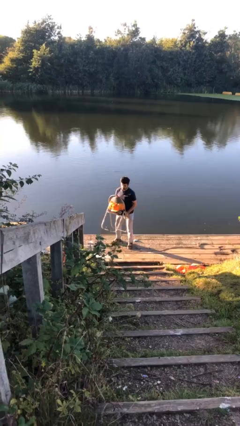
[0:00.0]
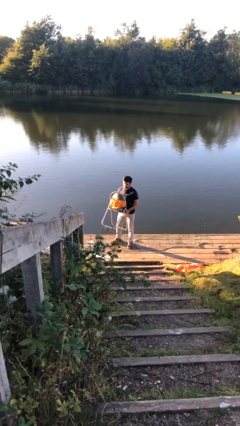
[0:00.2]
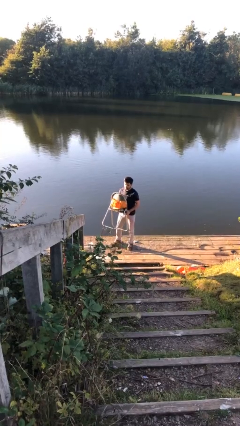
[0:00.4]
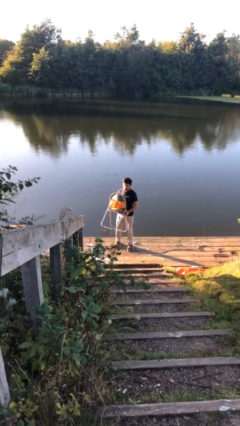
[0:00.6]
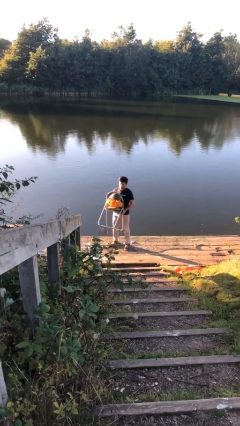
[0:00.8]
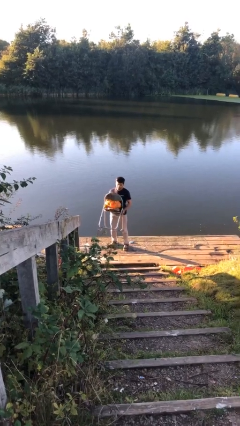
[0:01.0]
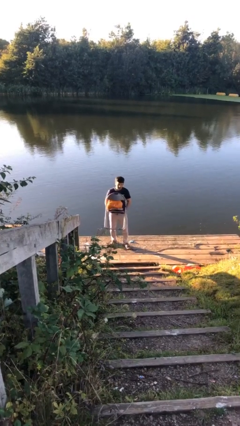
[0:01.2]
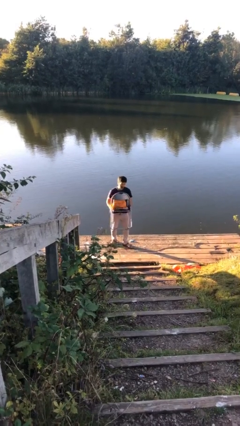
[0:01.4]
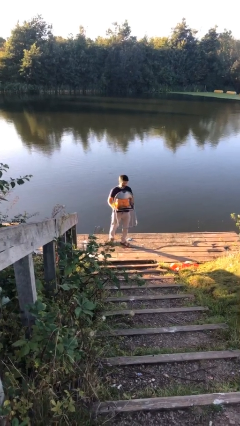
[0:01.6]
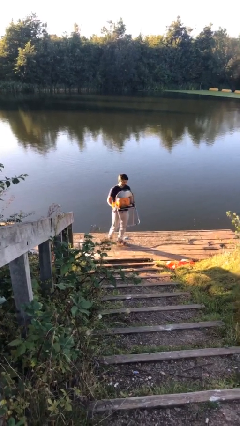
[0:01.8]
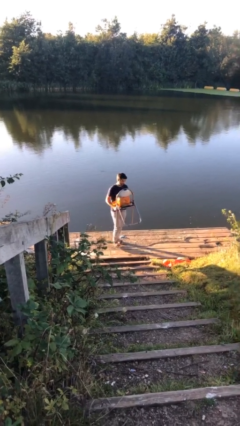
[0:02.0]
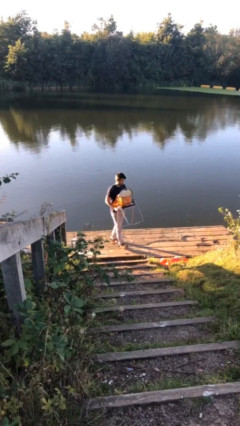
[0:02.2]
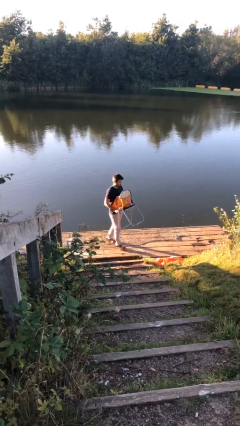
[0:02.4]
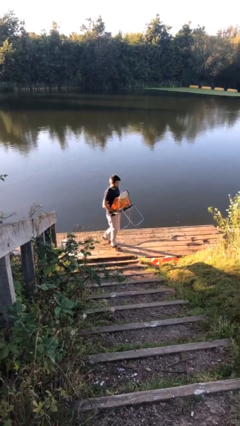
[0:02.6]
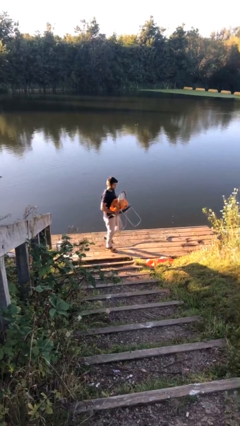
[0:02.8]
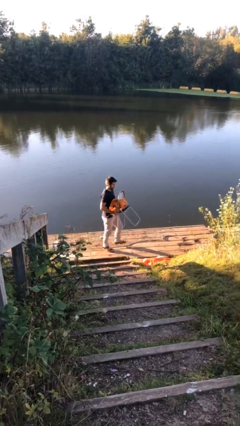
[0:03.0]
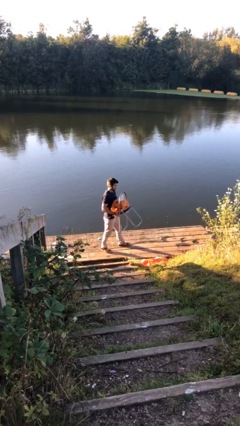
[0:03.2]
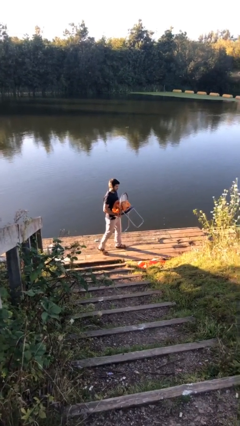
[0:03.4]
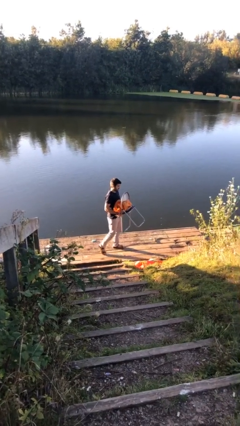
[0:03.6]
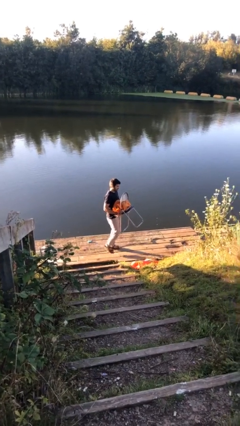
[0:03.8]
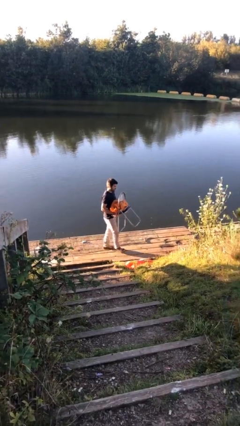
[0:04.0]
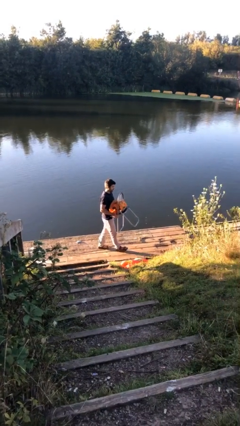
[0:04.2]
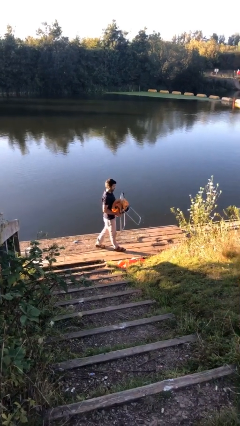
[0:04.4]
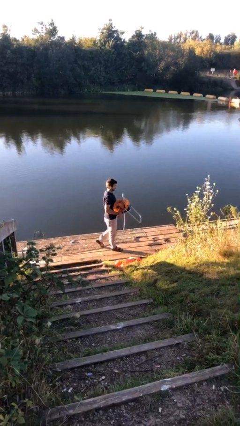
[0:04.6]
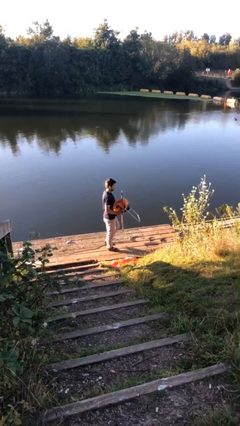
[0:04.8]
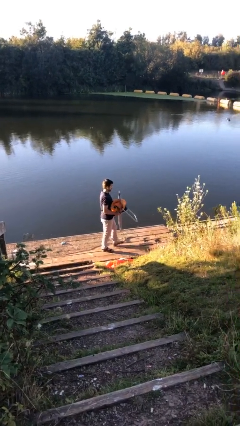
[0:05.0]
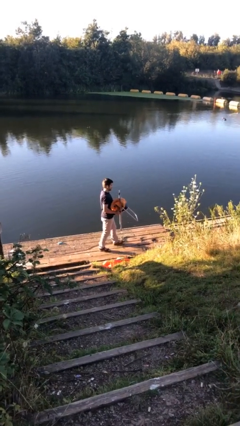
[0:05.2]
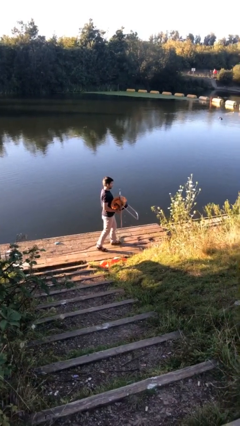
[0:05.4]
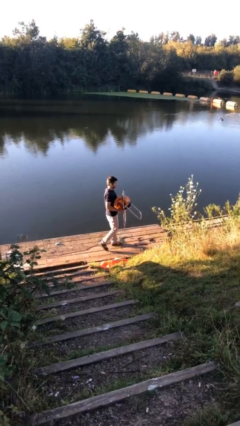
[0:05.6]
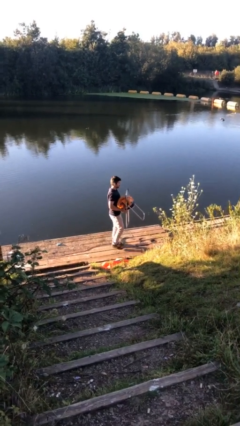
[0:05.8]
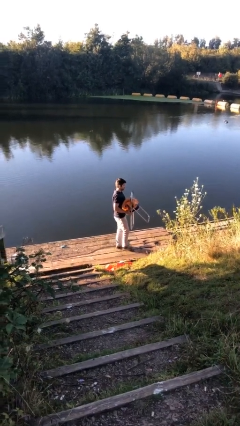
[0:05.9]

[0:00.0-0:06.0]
person carries heavy object

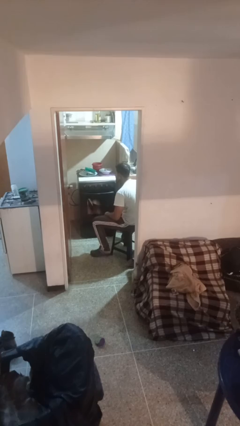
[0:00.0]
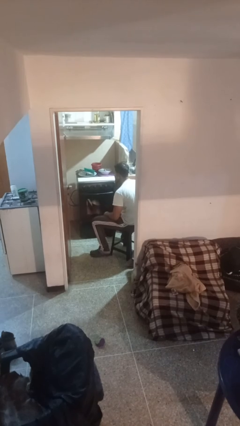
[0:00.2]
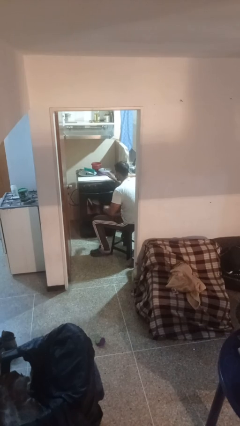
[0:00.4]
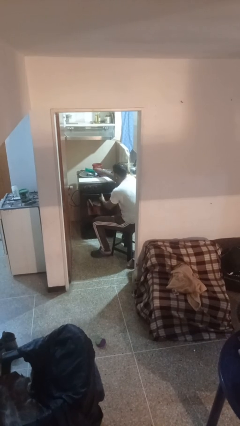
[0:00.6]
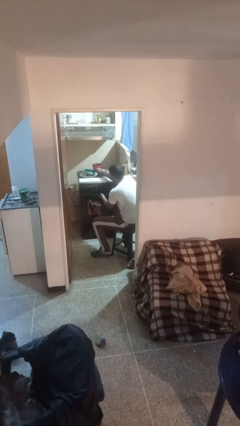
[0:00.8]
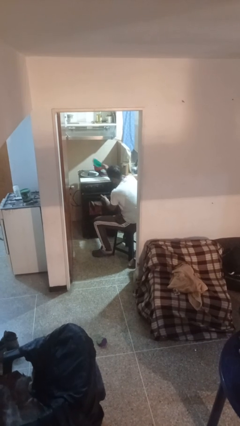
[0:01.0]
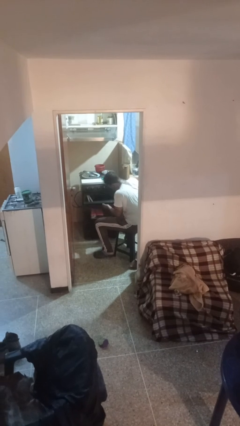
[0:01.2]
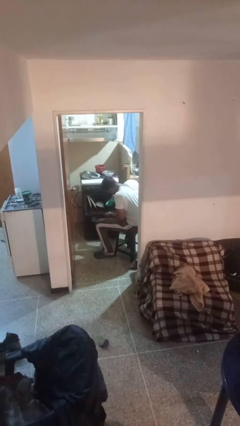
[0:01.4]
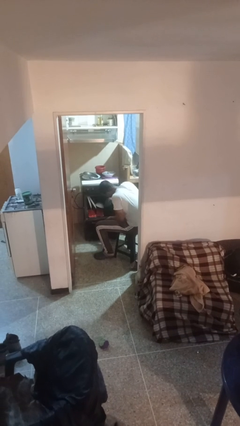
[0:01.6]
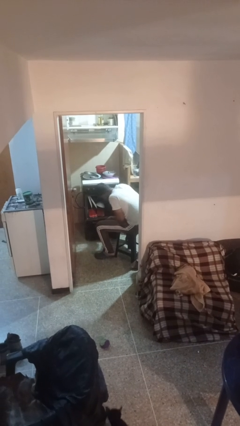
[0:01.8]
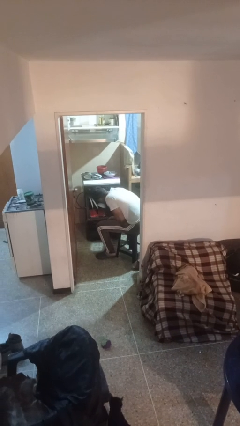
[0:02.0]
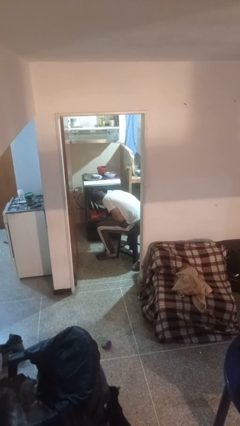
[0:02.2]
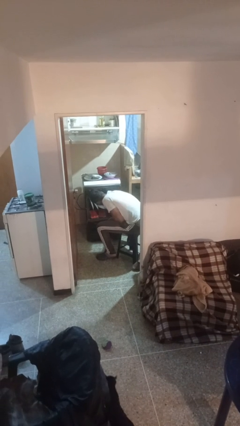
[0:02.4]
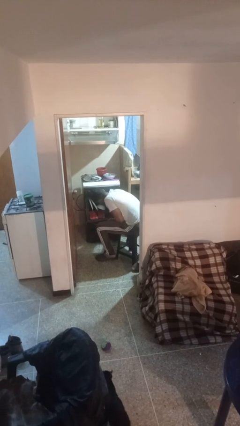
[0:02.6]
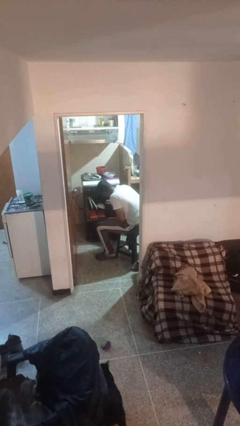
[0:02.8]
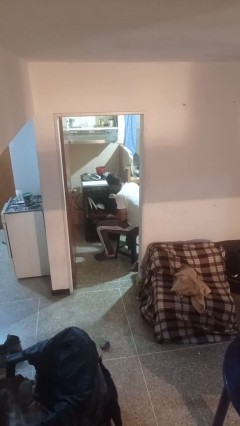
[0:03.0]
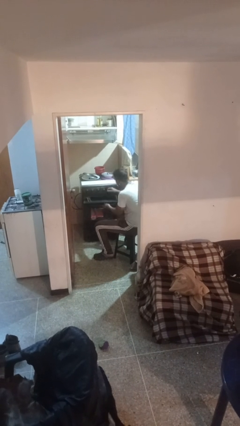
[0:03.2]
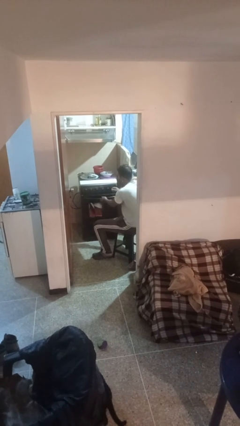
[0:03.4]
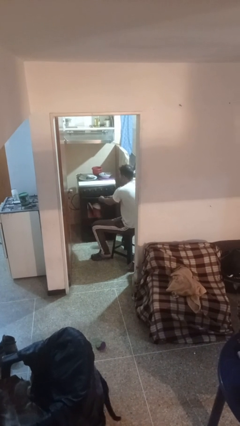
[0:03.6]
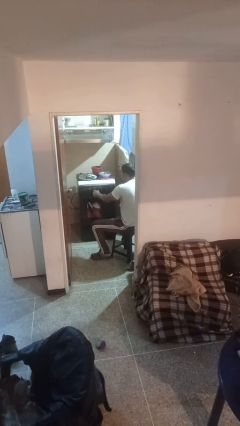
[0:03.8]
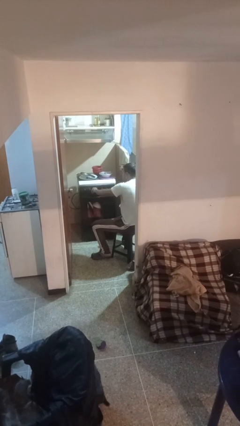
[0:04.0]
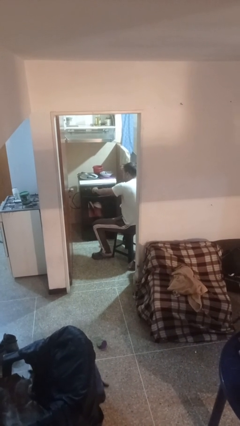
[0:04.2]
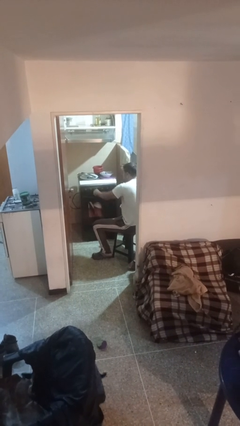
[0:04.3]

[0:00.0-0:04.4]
person loads dishwasher

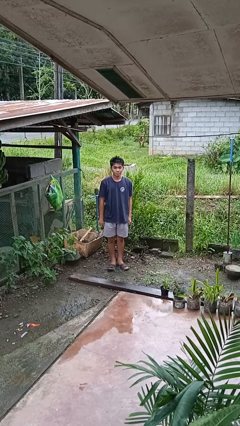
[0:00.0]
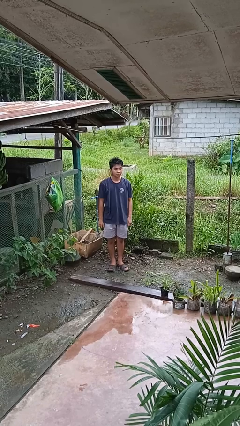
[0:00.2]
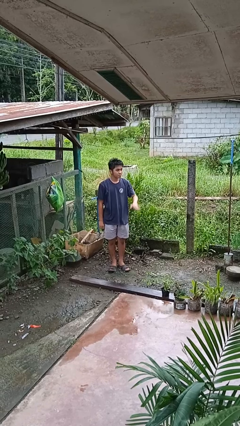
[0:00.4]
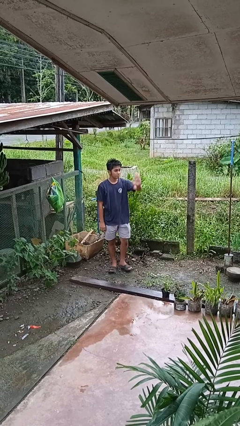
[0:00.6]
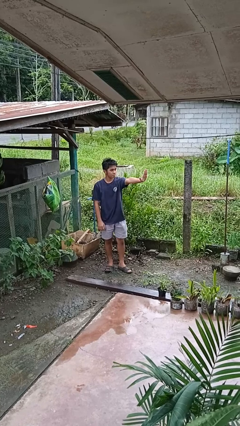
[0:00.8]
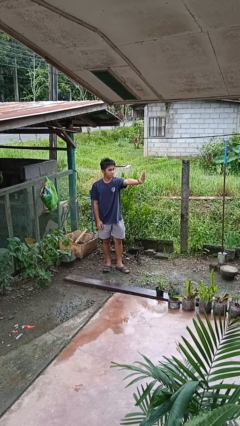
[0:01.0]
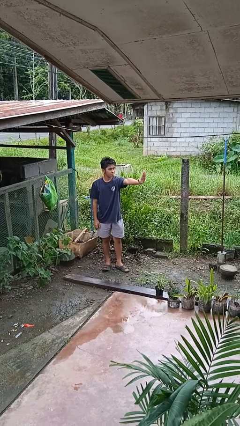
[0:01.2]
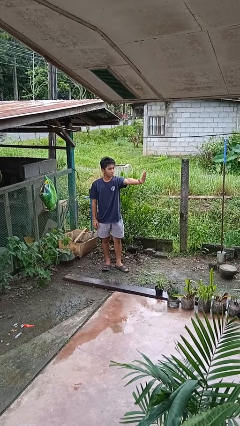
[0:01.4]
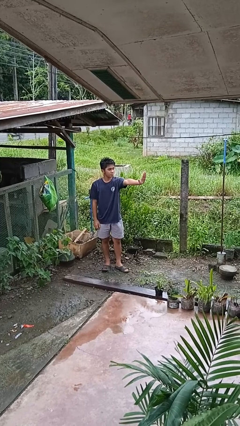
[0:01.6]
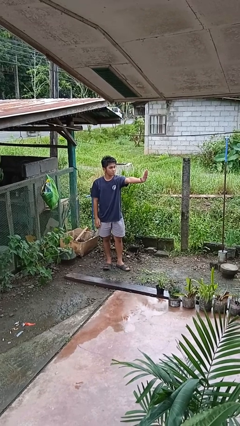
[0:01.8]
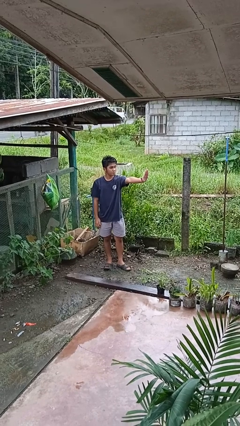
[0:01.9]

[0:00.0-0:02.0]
person gestures stop

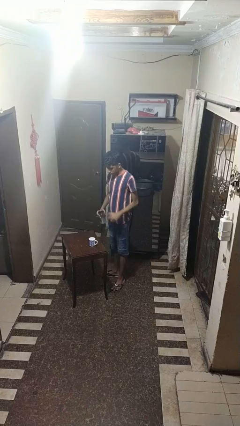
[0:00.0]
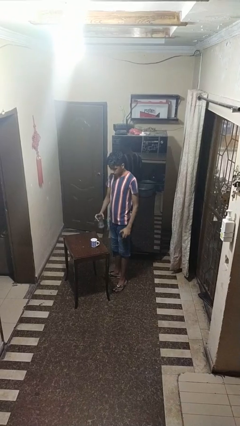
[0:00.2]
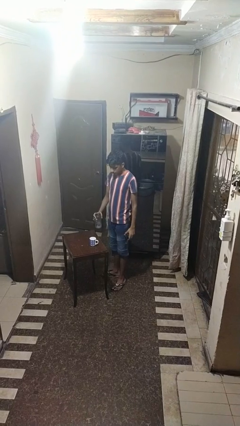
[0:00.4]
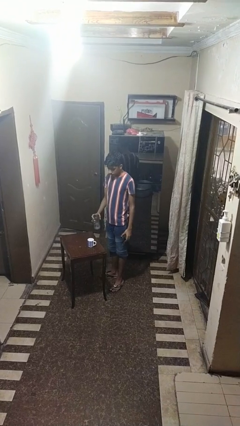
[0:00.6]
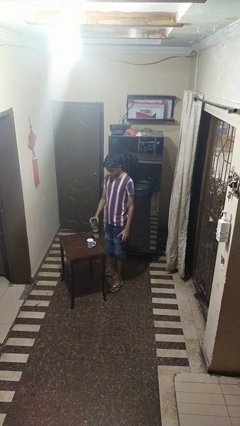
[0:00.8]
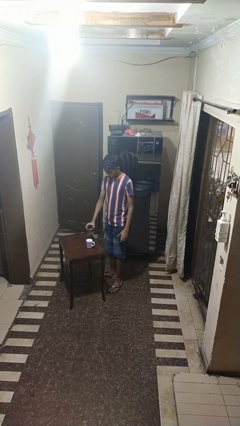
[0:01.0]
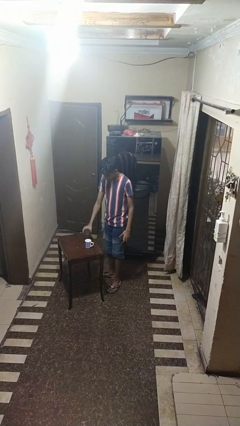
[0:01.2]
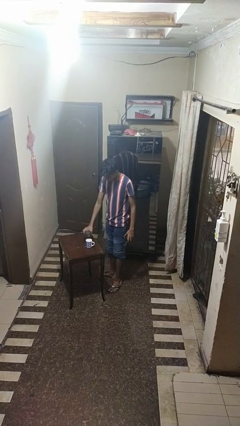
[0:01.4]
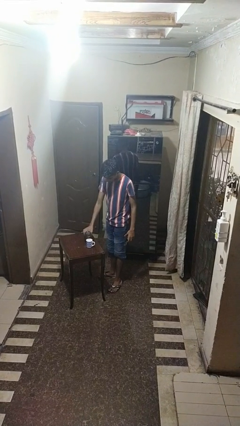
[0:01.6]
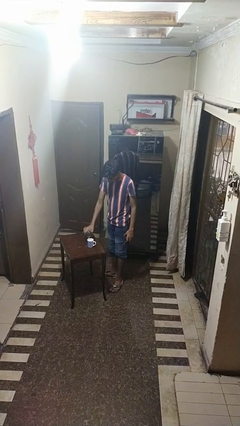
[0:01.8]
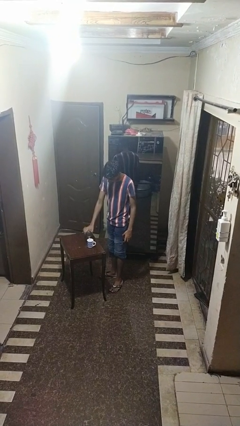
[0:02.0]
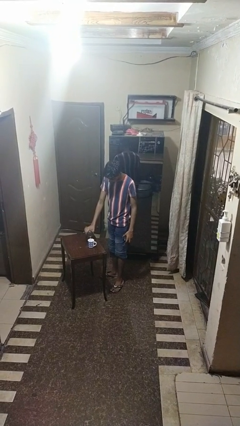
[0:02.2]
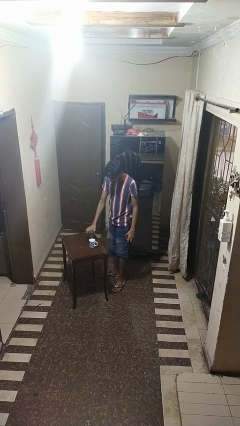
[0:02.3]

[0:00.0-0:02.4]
person pours liquid into cup

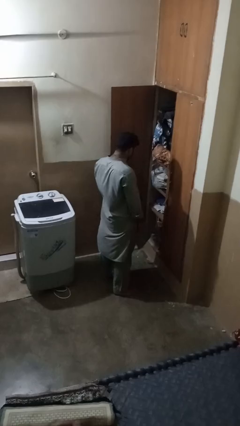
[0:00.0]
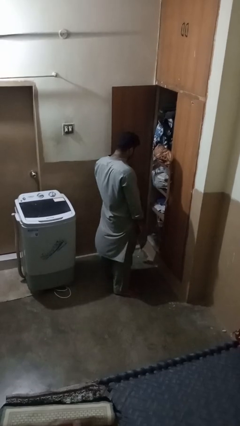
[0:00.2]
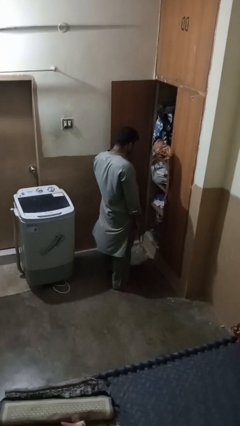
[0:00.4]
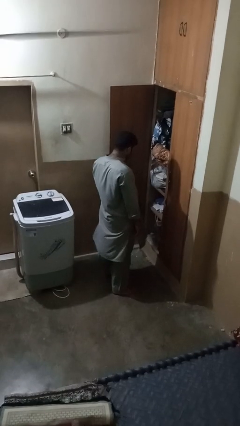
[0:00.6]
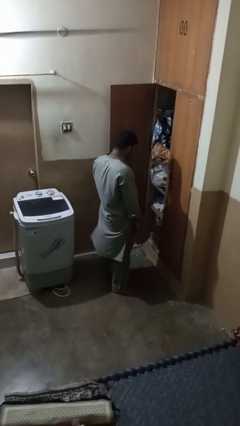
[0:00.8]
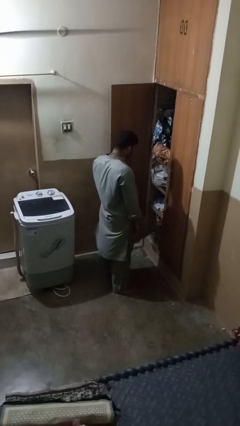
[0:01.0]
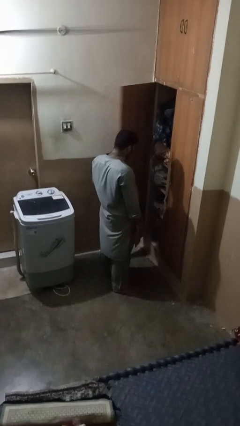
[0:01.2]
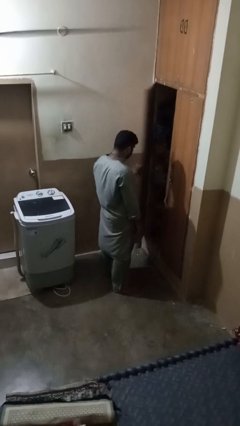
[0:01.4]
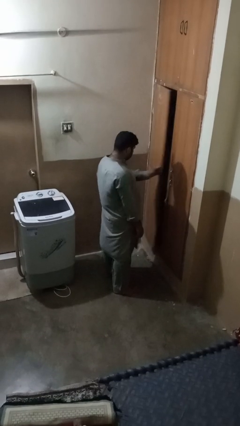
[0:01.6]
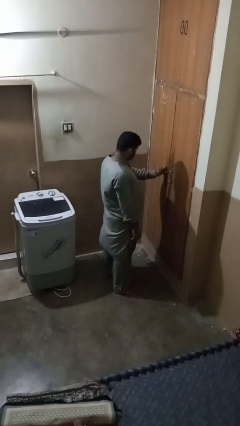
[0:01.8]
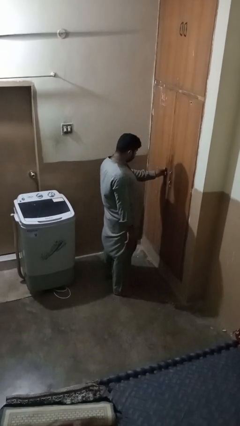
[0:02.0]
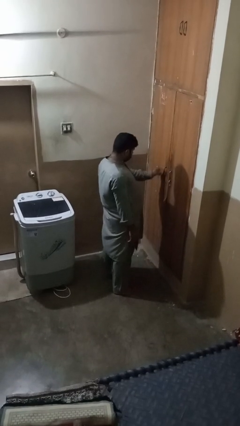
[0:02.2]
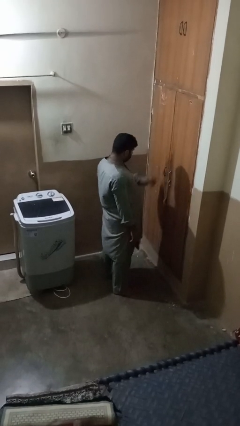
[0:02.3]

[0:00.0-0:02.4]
person closes closet door
